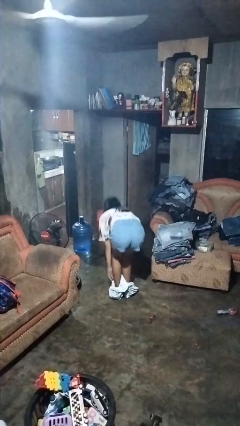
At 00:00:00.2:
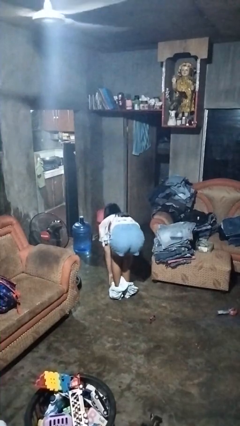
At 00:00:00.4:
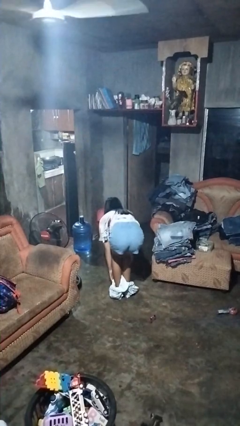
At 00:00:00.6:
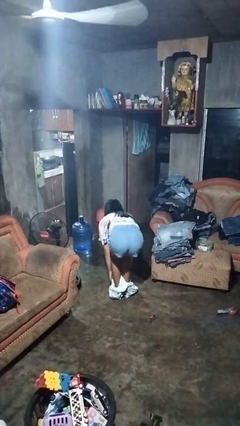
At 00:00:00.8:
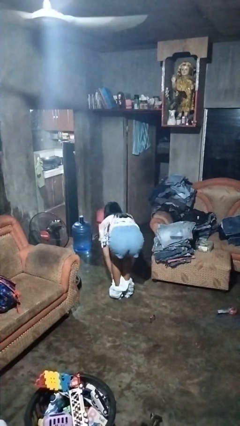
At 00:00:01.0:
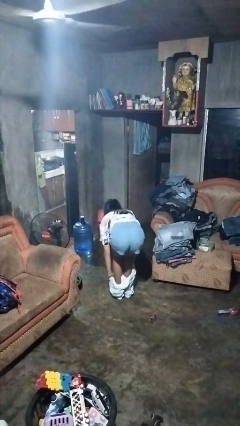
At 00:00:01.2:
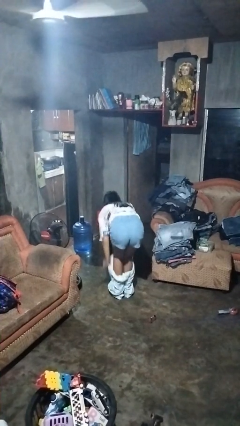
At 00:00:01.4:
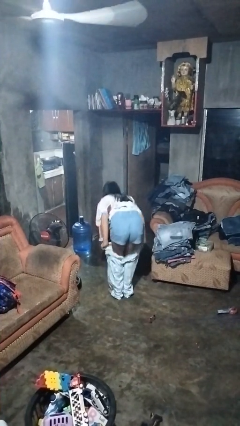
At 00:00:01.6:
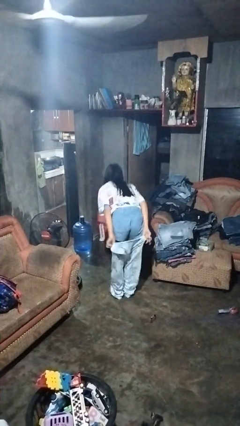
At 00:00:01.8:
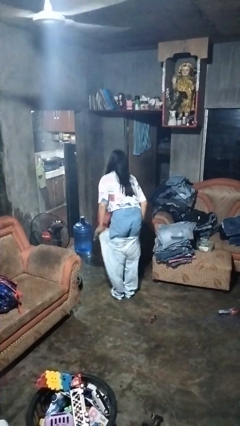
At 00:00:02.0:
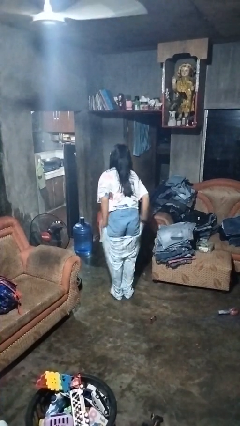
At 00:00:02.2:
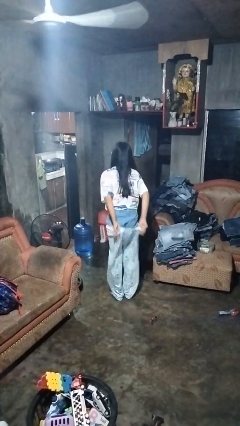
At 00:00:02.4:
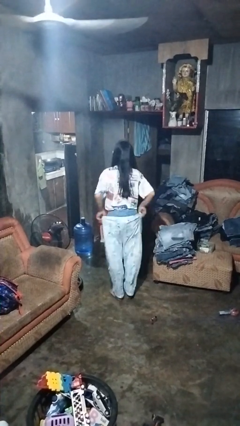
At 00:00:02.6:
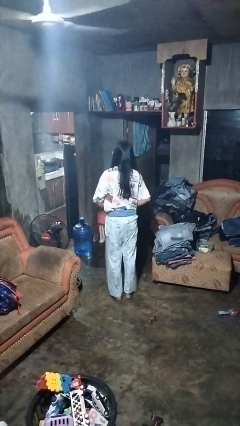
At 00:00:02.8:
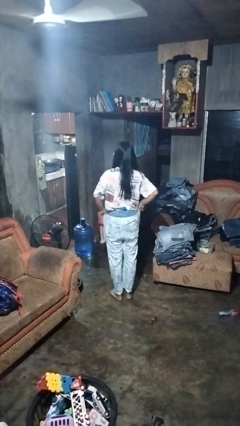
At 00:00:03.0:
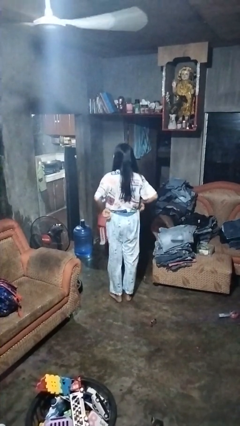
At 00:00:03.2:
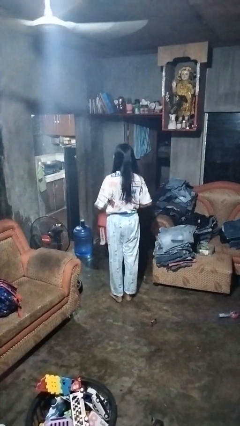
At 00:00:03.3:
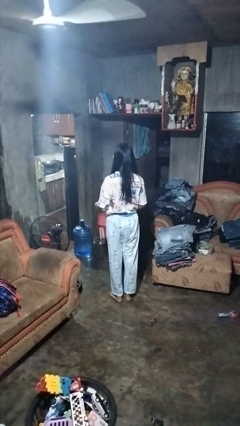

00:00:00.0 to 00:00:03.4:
person puts on pants

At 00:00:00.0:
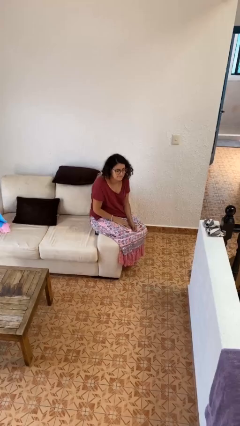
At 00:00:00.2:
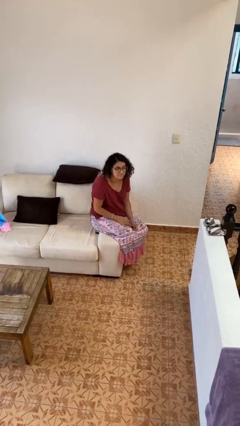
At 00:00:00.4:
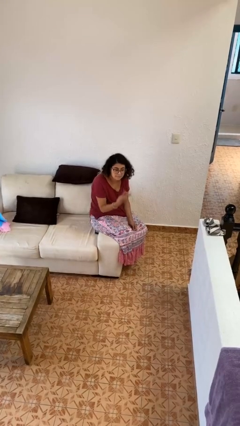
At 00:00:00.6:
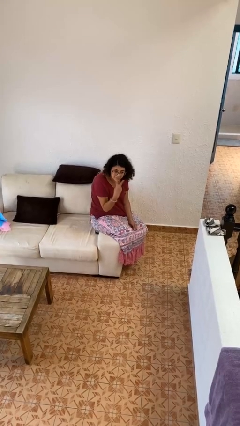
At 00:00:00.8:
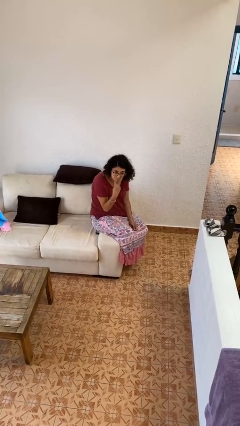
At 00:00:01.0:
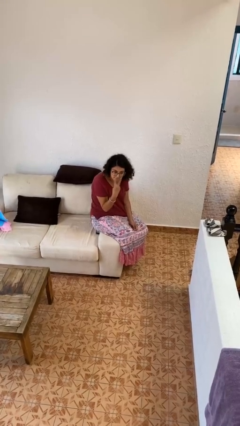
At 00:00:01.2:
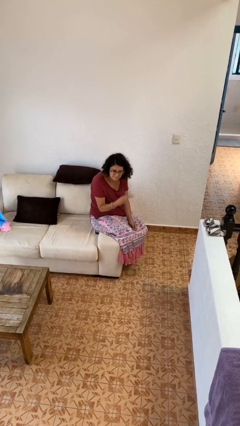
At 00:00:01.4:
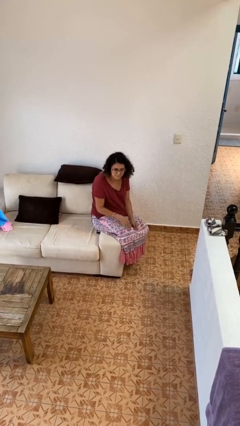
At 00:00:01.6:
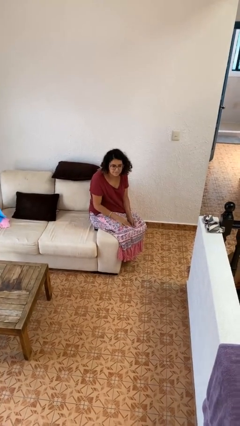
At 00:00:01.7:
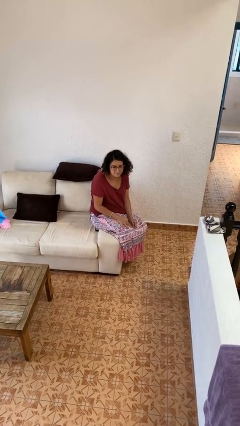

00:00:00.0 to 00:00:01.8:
person gestures watch closely

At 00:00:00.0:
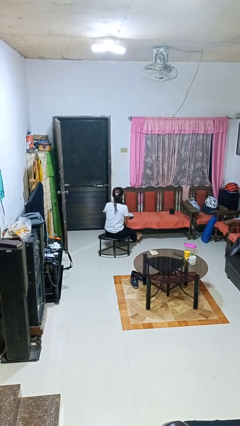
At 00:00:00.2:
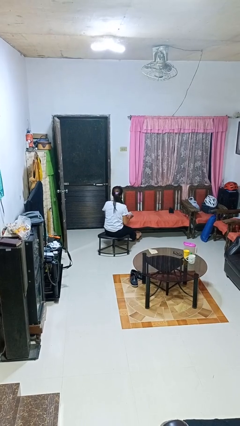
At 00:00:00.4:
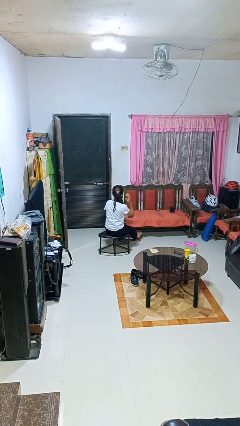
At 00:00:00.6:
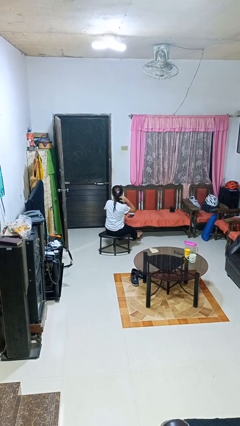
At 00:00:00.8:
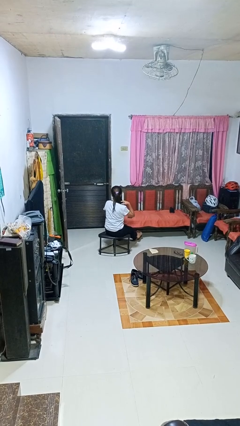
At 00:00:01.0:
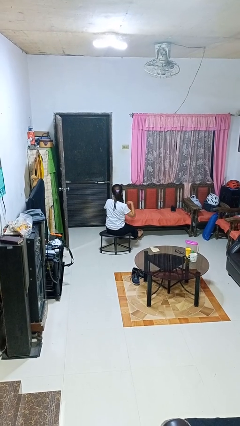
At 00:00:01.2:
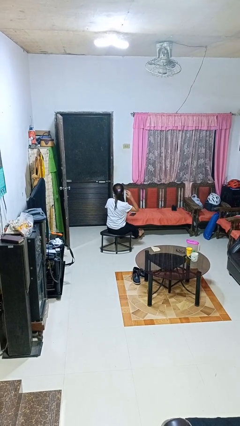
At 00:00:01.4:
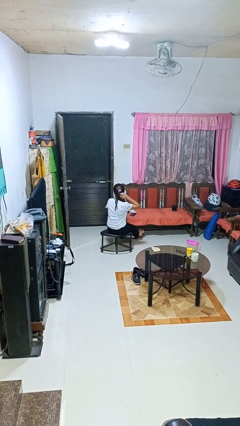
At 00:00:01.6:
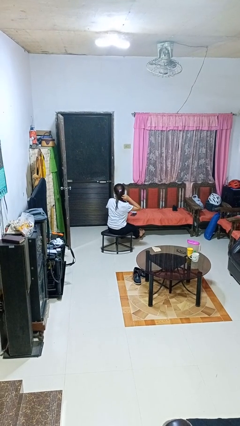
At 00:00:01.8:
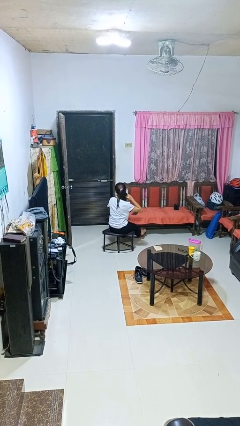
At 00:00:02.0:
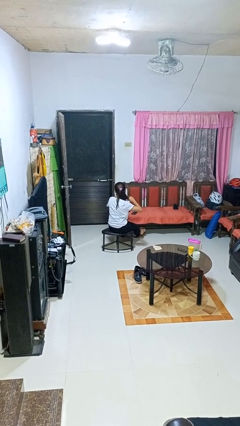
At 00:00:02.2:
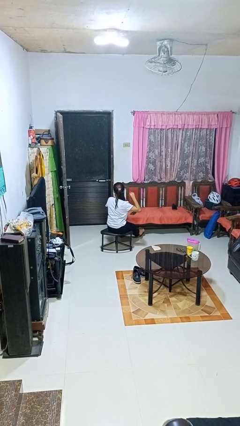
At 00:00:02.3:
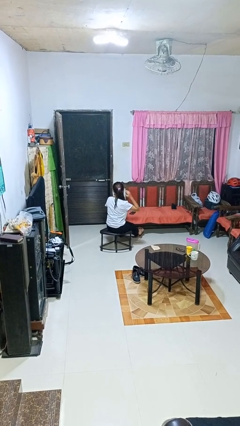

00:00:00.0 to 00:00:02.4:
person strokes hair

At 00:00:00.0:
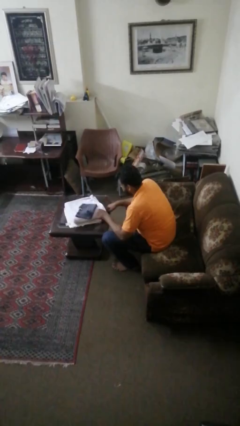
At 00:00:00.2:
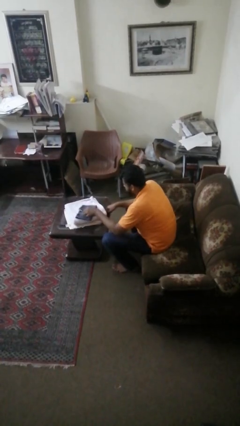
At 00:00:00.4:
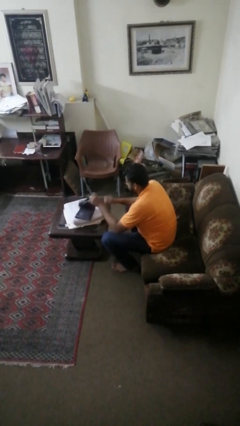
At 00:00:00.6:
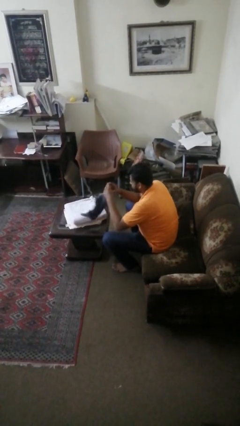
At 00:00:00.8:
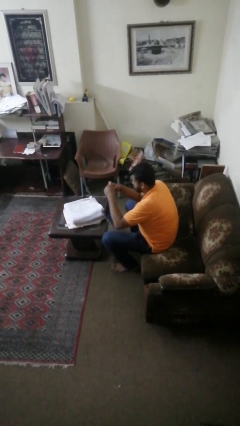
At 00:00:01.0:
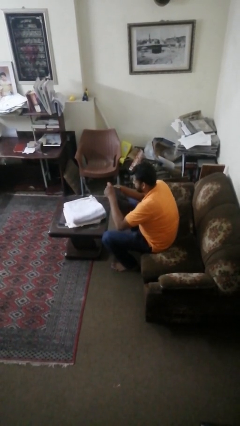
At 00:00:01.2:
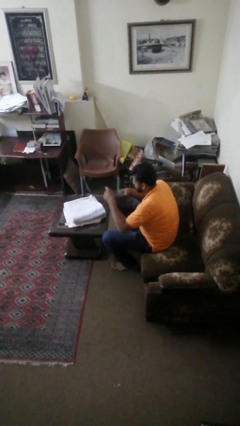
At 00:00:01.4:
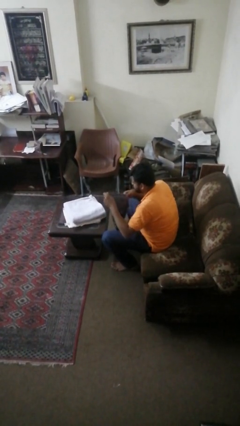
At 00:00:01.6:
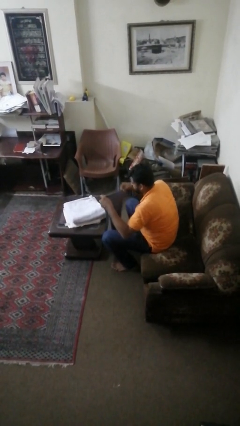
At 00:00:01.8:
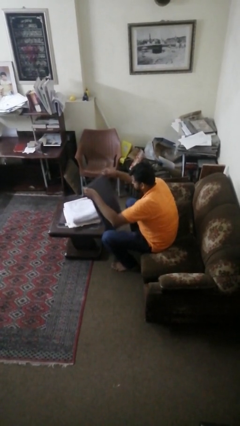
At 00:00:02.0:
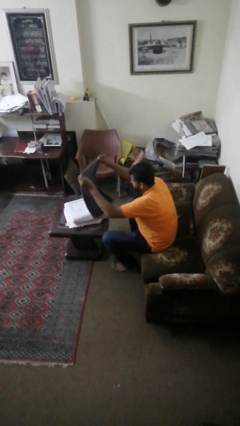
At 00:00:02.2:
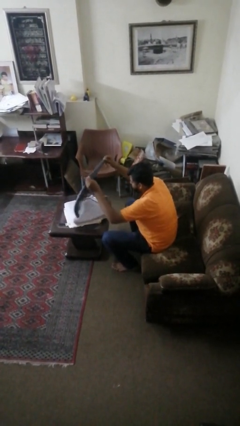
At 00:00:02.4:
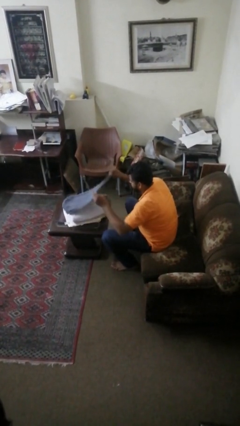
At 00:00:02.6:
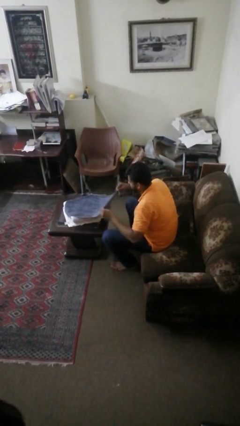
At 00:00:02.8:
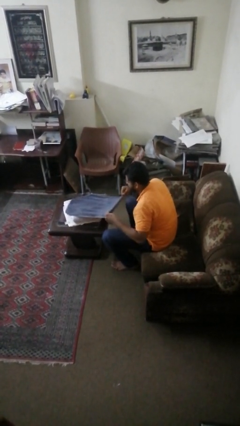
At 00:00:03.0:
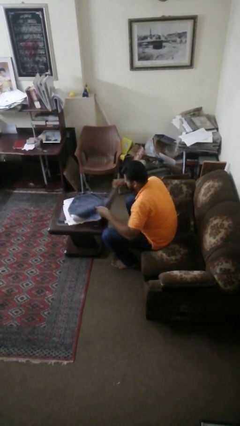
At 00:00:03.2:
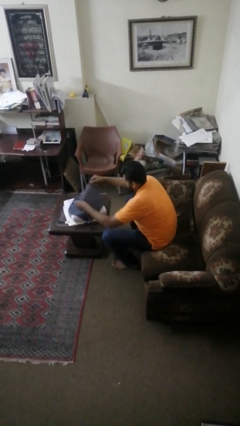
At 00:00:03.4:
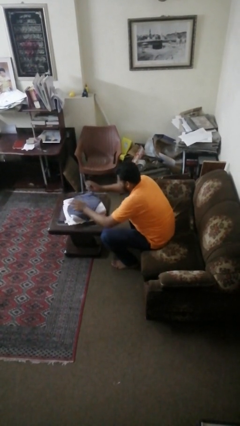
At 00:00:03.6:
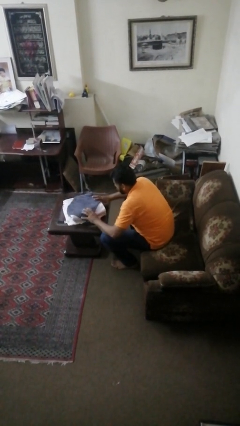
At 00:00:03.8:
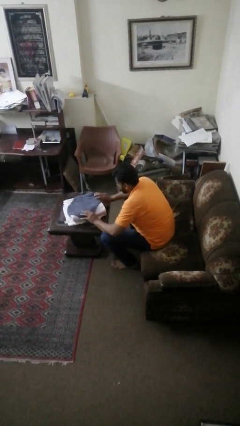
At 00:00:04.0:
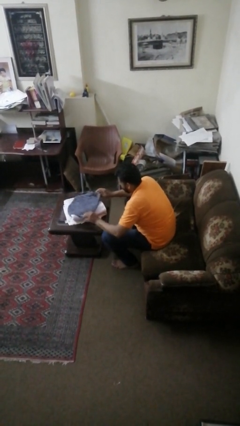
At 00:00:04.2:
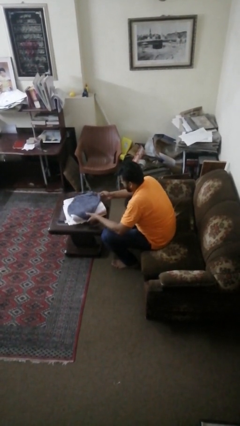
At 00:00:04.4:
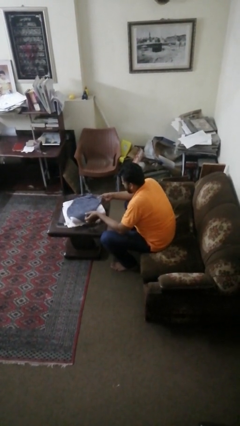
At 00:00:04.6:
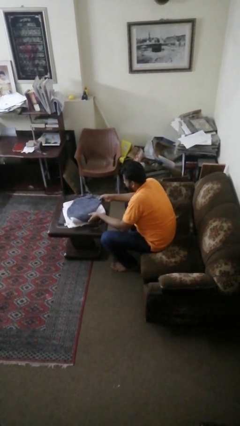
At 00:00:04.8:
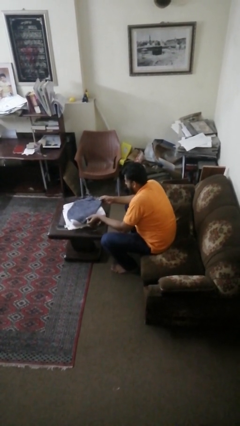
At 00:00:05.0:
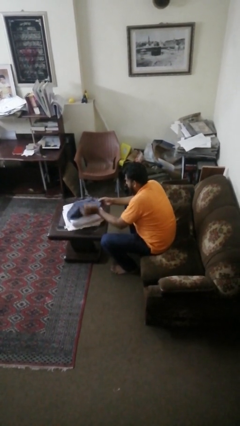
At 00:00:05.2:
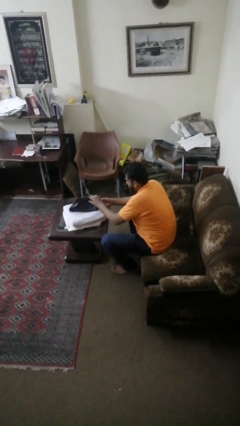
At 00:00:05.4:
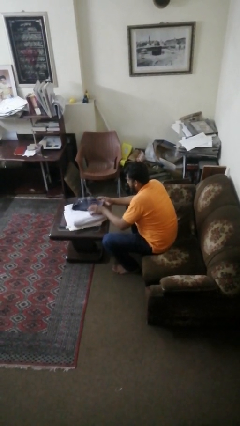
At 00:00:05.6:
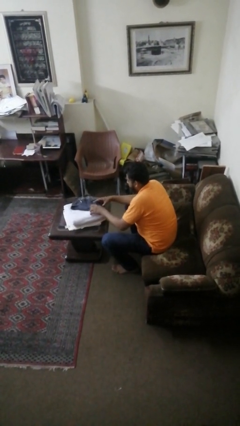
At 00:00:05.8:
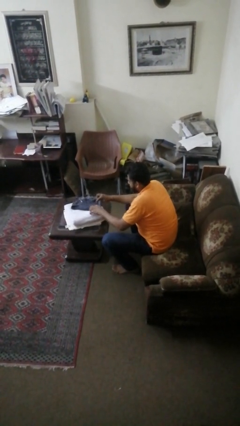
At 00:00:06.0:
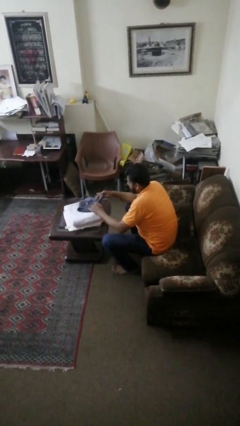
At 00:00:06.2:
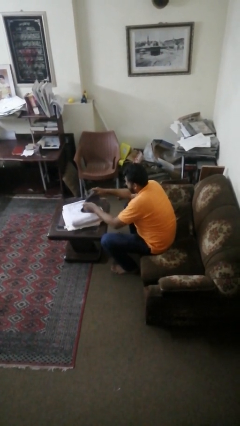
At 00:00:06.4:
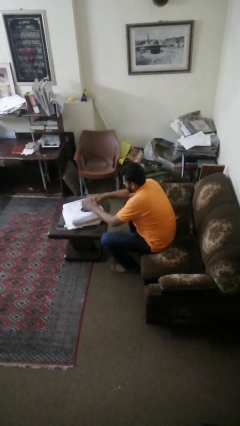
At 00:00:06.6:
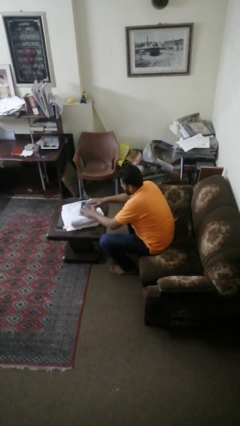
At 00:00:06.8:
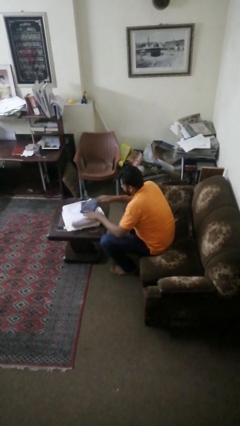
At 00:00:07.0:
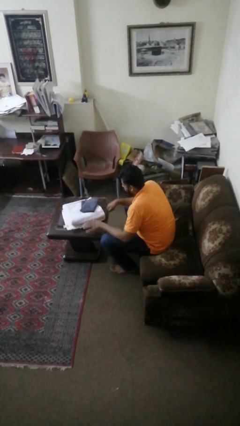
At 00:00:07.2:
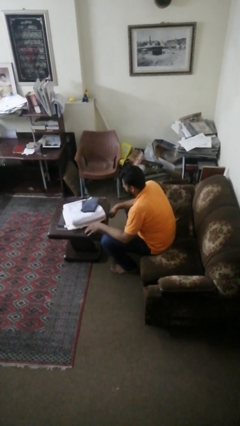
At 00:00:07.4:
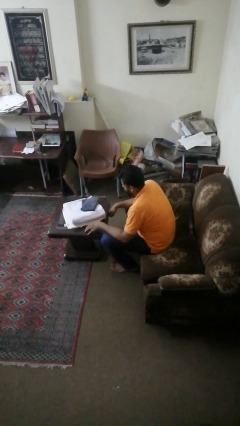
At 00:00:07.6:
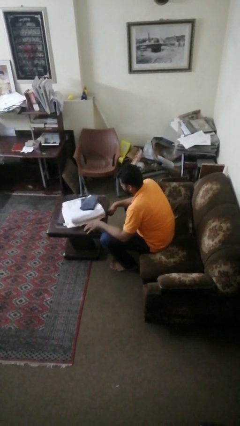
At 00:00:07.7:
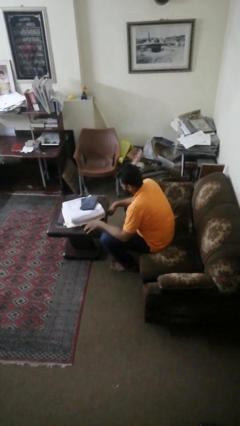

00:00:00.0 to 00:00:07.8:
person folds towel

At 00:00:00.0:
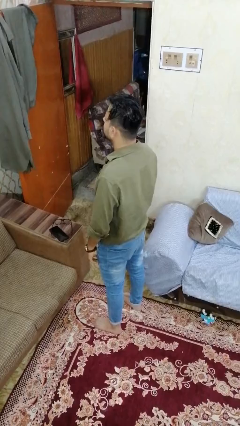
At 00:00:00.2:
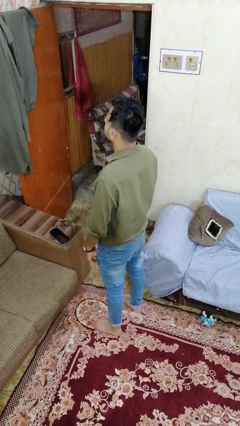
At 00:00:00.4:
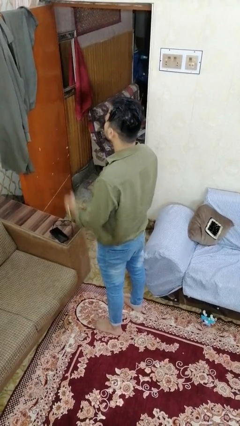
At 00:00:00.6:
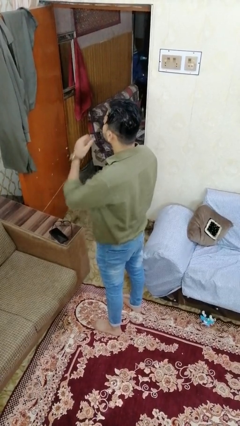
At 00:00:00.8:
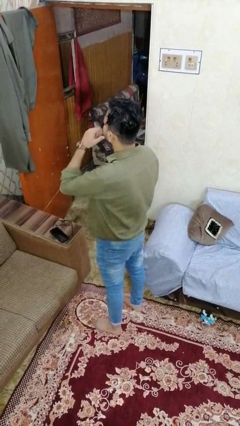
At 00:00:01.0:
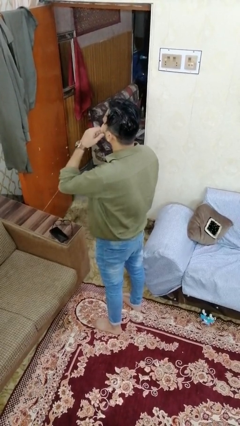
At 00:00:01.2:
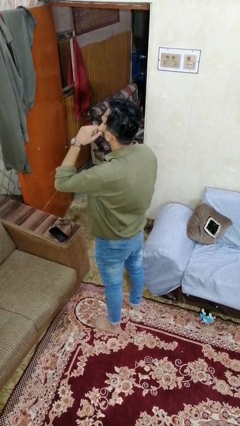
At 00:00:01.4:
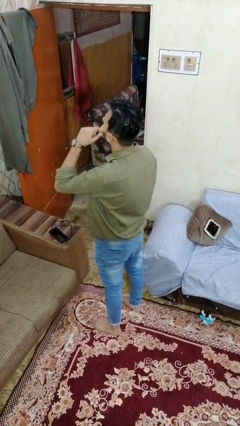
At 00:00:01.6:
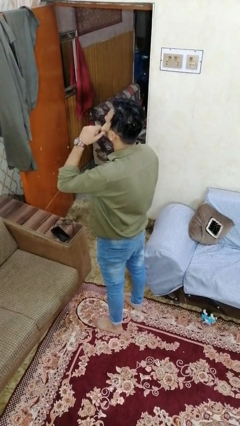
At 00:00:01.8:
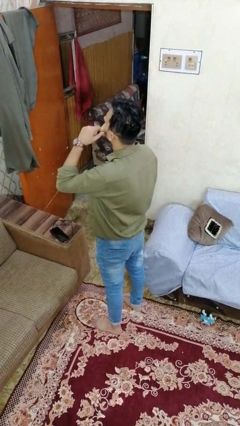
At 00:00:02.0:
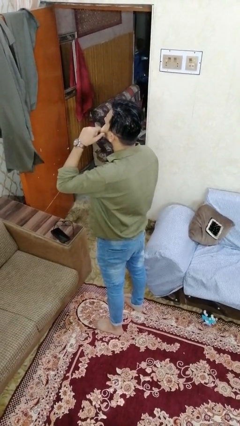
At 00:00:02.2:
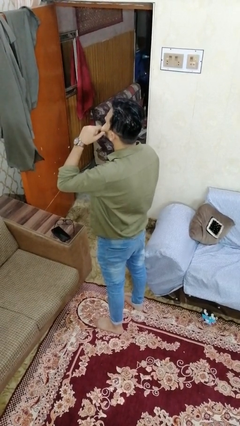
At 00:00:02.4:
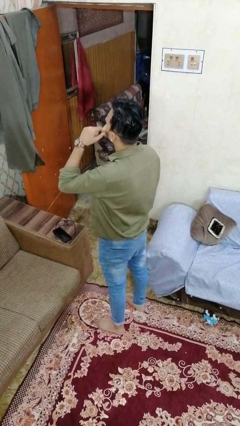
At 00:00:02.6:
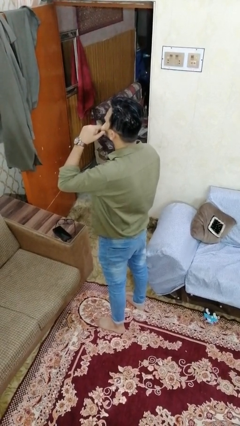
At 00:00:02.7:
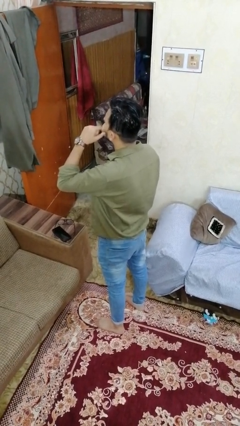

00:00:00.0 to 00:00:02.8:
person scratches face
